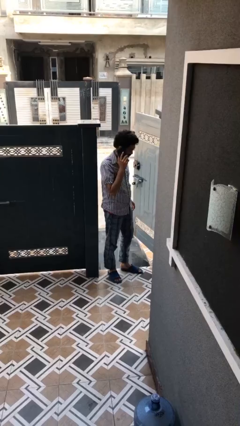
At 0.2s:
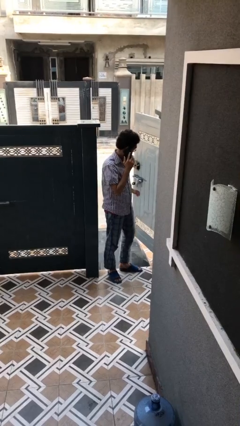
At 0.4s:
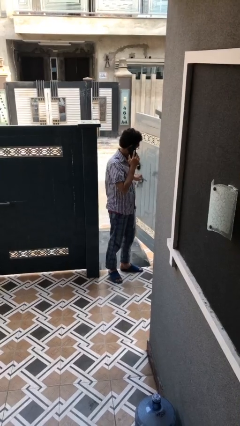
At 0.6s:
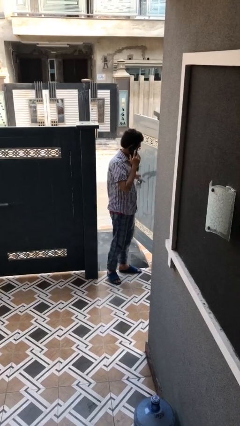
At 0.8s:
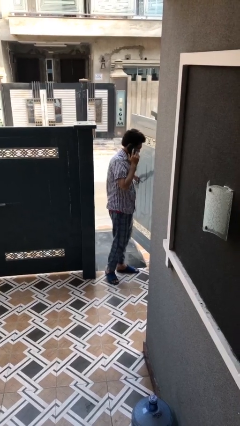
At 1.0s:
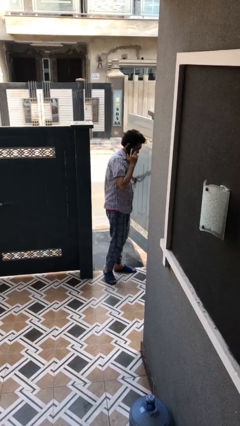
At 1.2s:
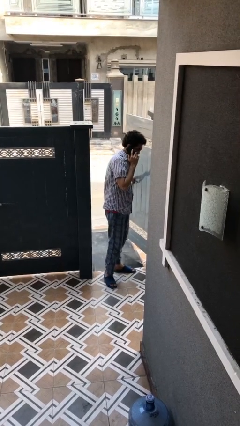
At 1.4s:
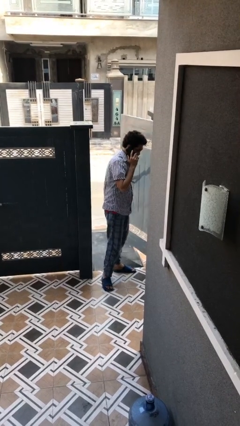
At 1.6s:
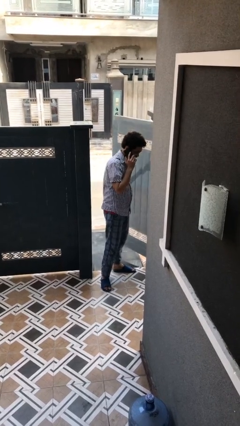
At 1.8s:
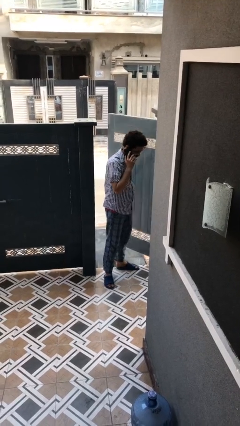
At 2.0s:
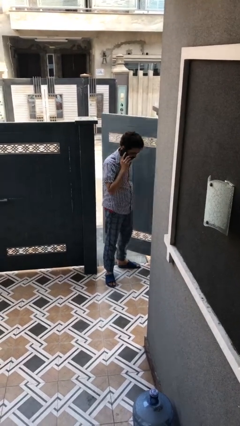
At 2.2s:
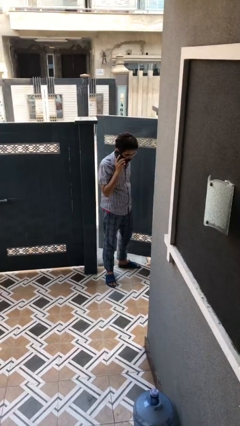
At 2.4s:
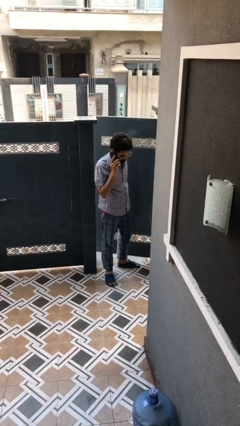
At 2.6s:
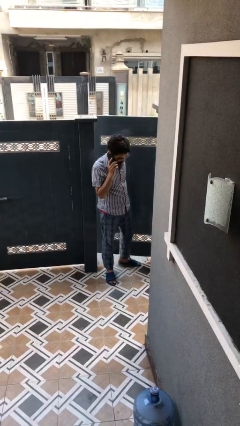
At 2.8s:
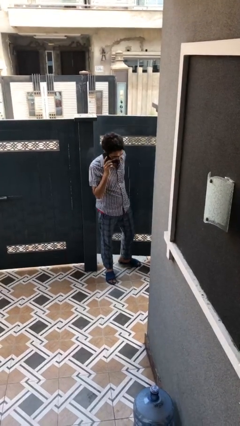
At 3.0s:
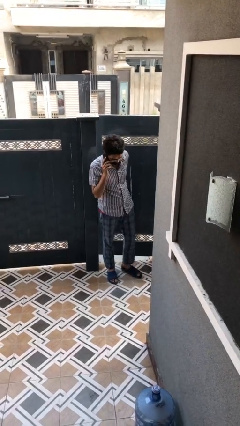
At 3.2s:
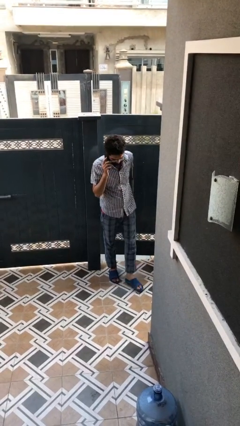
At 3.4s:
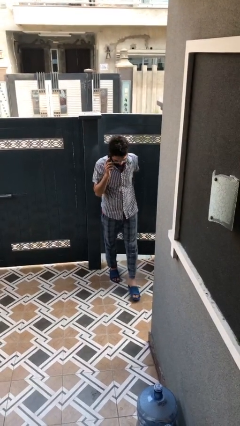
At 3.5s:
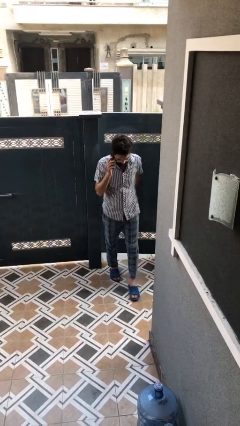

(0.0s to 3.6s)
person closes facility door

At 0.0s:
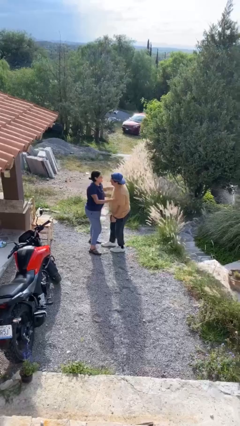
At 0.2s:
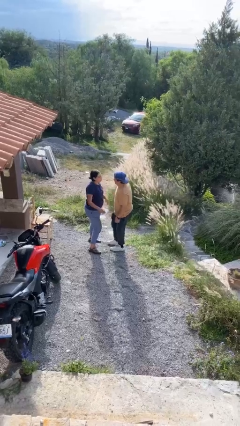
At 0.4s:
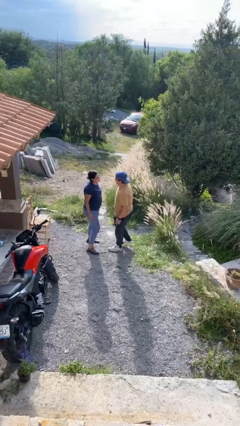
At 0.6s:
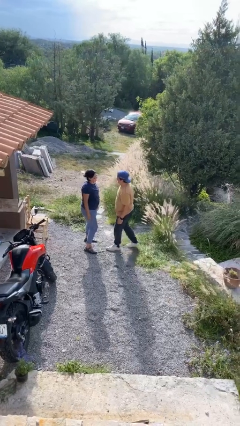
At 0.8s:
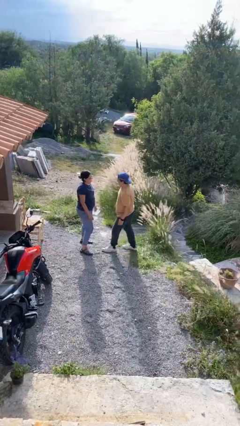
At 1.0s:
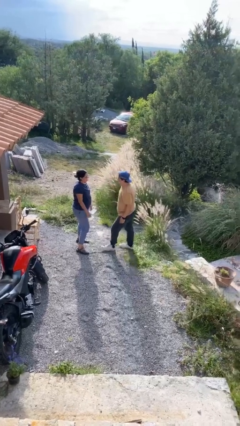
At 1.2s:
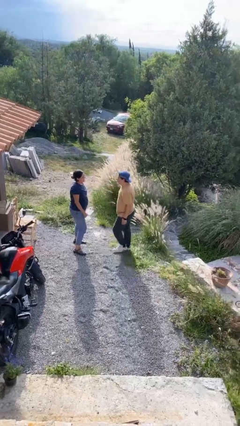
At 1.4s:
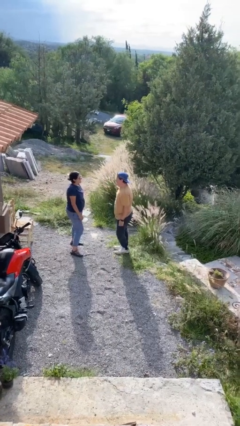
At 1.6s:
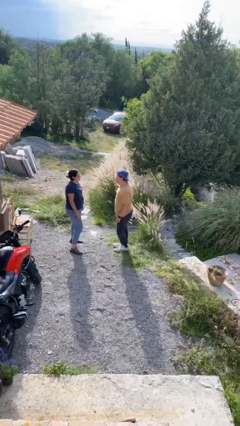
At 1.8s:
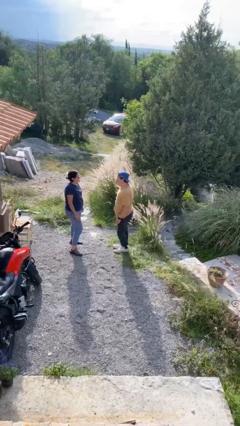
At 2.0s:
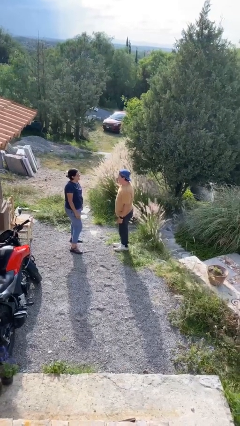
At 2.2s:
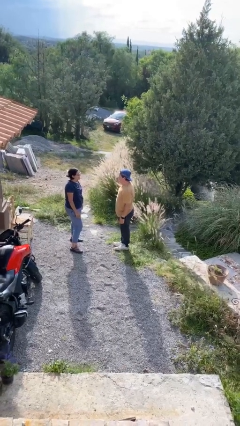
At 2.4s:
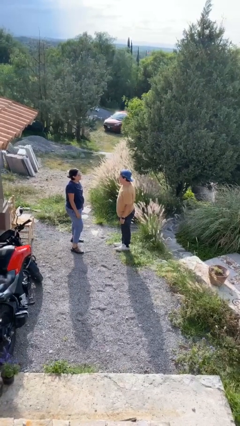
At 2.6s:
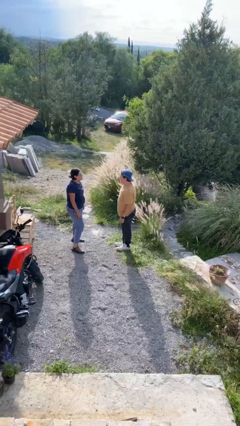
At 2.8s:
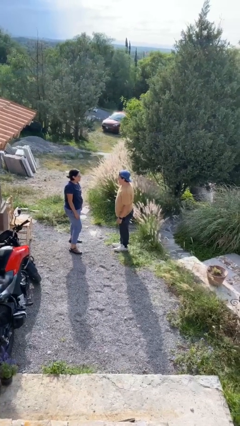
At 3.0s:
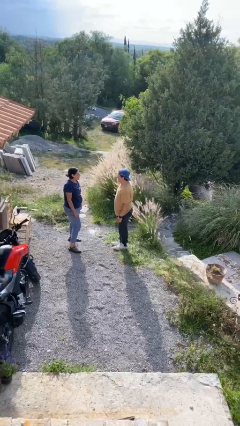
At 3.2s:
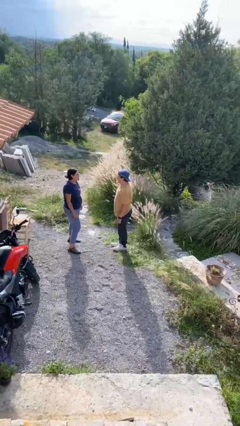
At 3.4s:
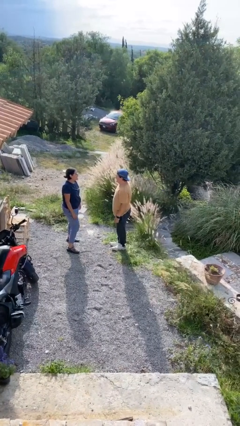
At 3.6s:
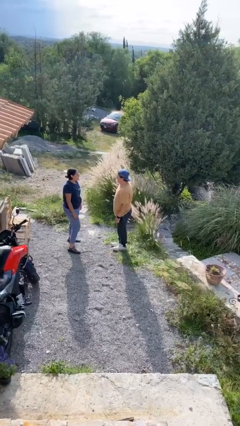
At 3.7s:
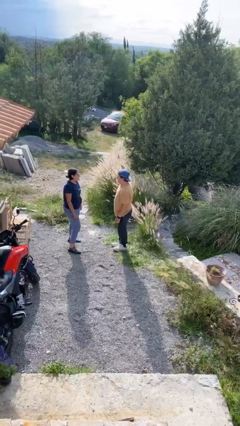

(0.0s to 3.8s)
person talks to person

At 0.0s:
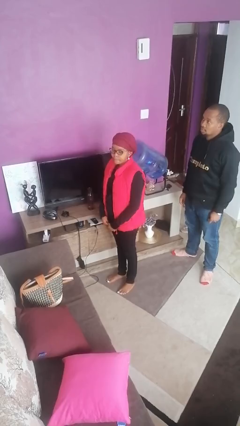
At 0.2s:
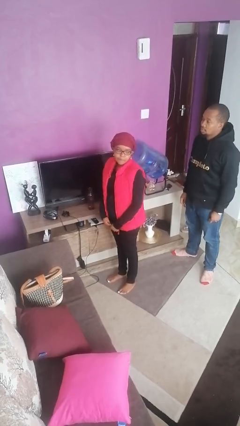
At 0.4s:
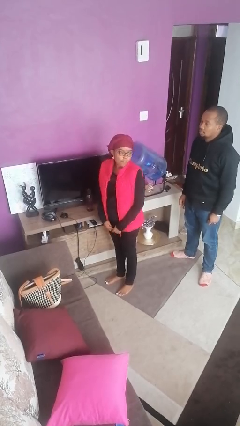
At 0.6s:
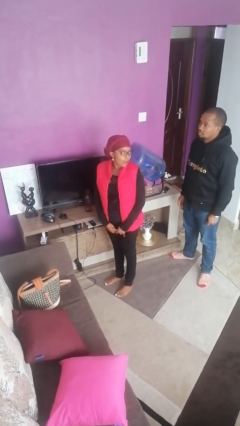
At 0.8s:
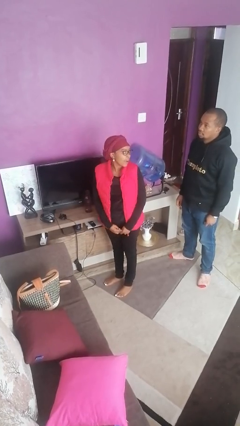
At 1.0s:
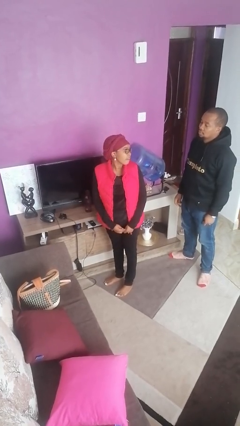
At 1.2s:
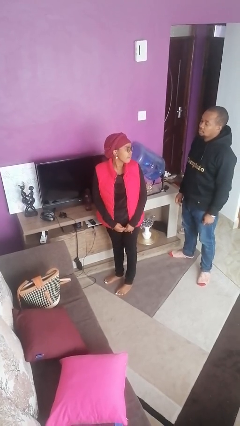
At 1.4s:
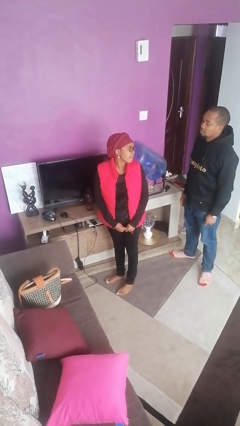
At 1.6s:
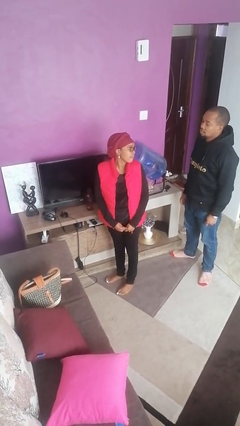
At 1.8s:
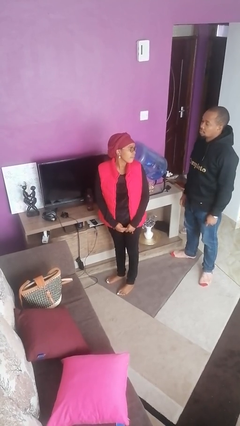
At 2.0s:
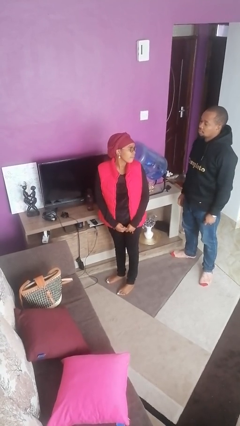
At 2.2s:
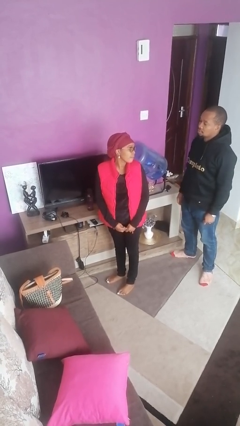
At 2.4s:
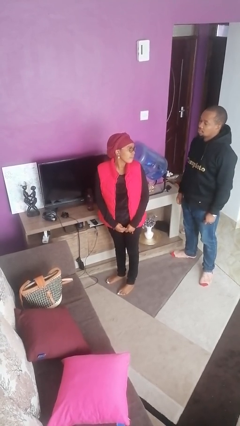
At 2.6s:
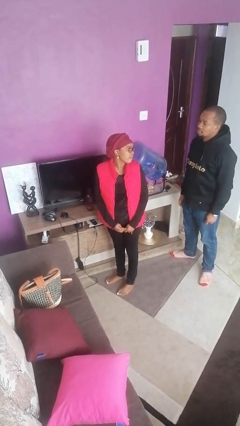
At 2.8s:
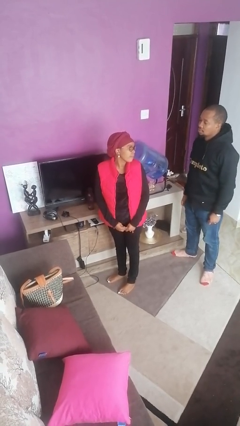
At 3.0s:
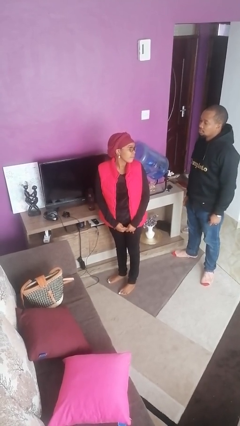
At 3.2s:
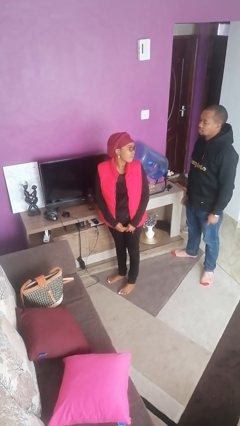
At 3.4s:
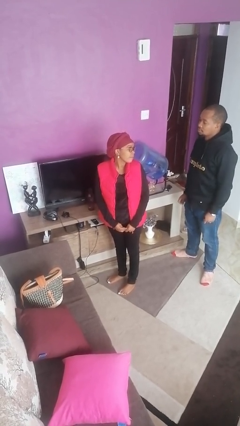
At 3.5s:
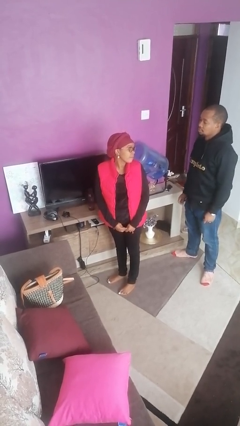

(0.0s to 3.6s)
person looks over shoulder

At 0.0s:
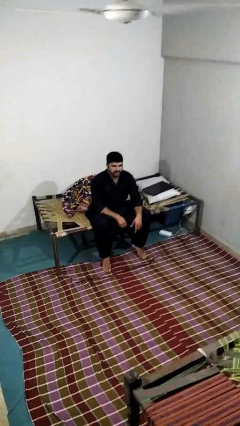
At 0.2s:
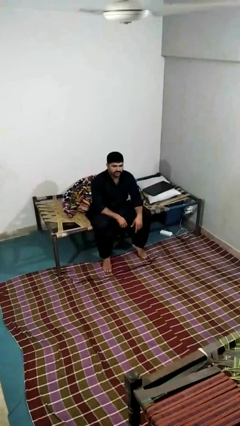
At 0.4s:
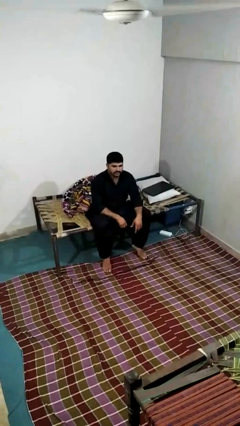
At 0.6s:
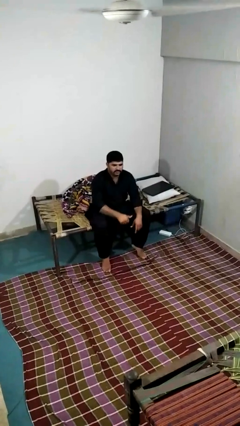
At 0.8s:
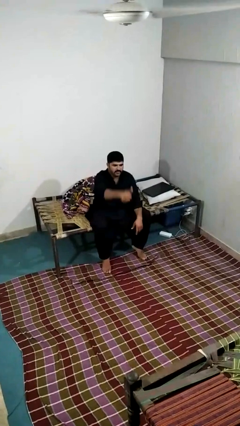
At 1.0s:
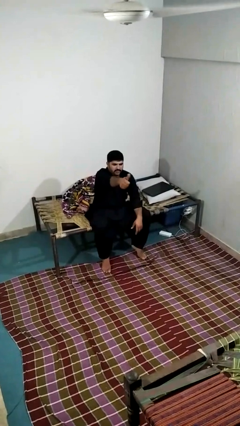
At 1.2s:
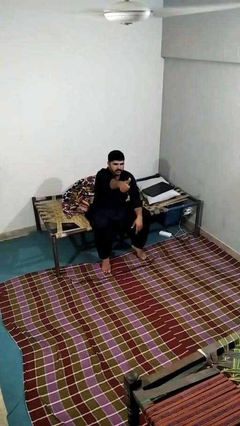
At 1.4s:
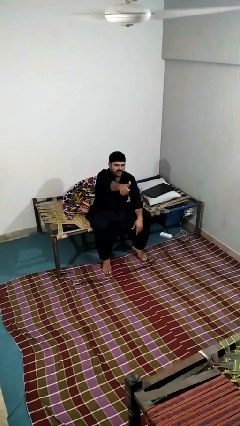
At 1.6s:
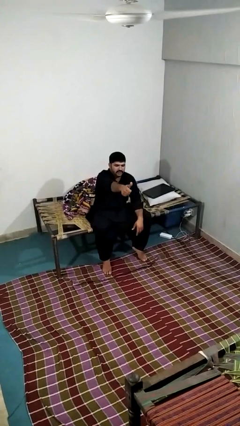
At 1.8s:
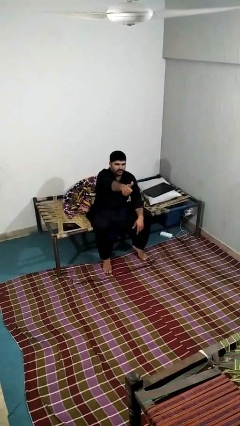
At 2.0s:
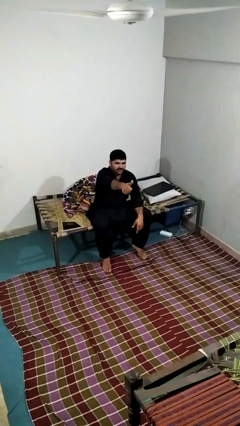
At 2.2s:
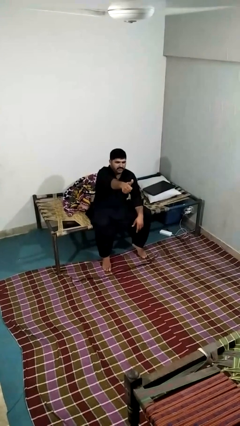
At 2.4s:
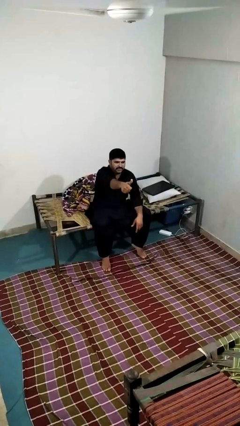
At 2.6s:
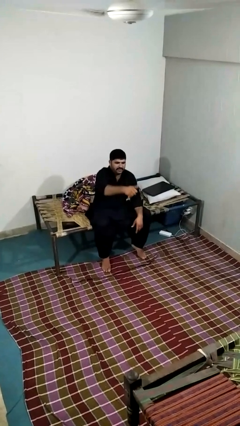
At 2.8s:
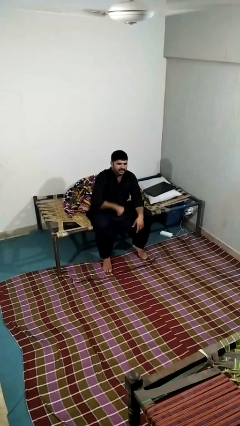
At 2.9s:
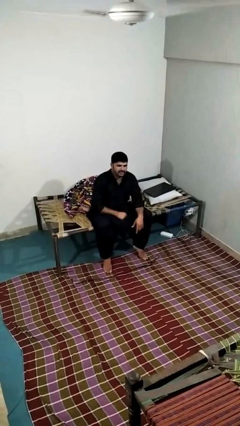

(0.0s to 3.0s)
person gestures thumbs up

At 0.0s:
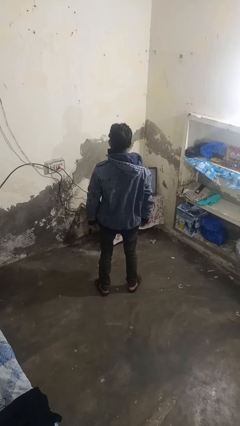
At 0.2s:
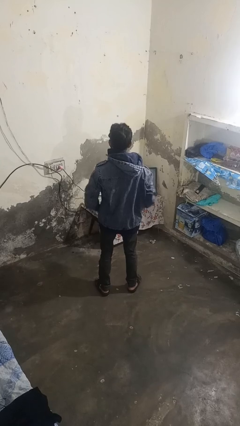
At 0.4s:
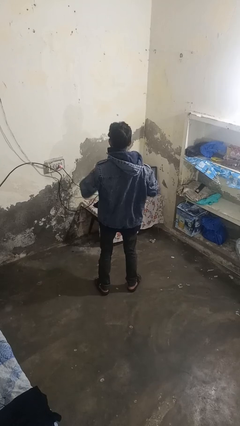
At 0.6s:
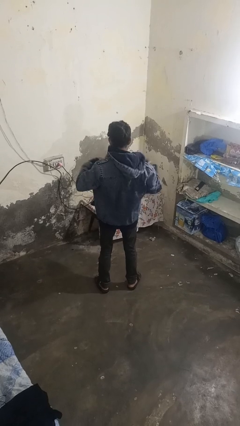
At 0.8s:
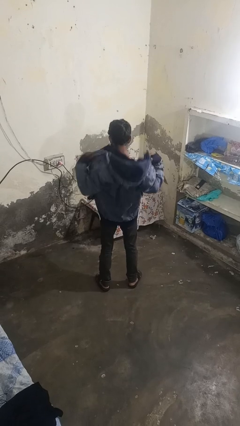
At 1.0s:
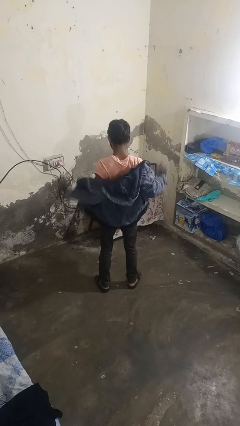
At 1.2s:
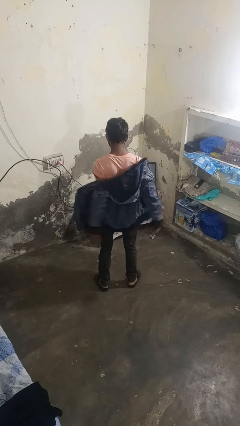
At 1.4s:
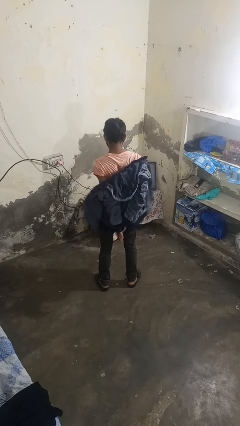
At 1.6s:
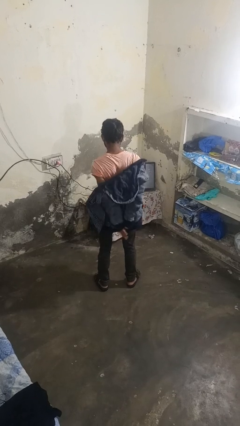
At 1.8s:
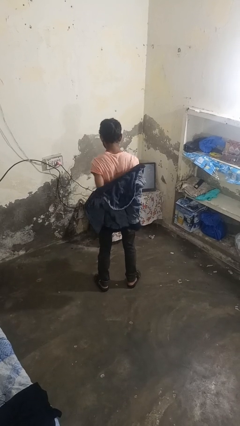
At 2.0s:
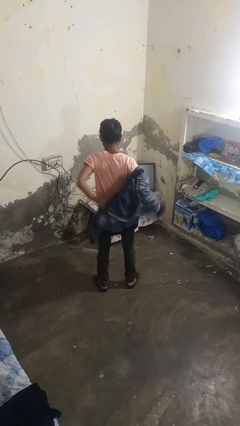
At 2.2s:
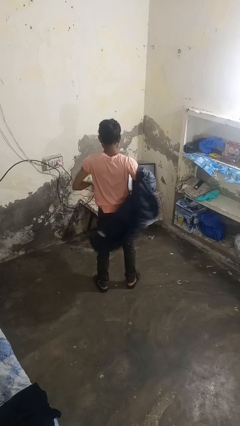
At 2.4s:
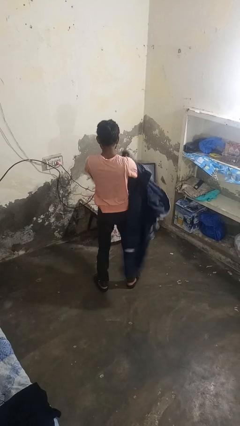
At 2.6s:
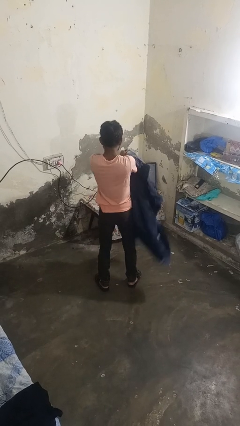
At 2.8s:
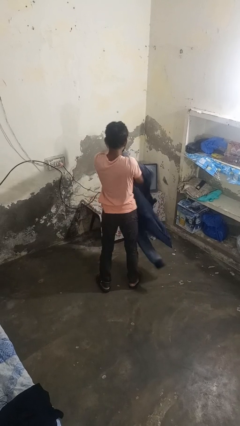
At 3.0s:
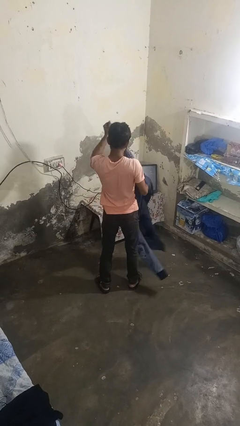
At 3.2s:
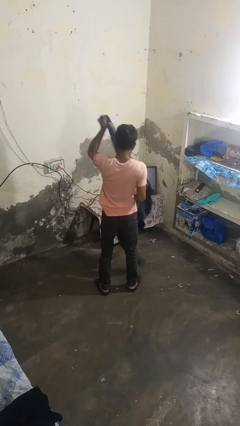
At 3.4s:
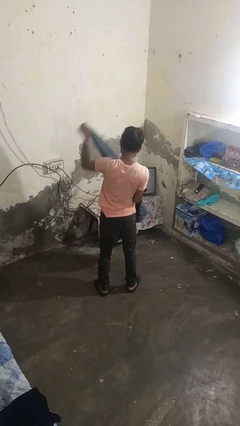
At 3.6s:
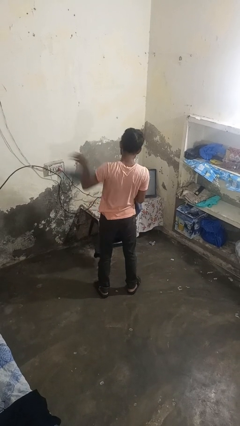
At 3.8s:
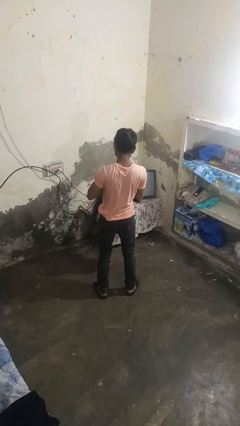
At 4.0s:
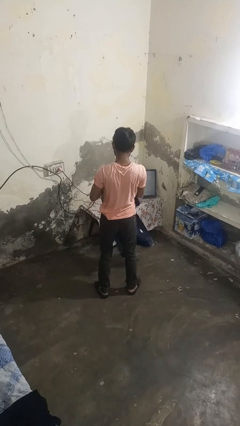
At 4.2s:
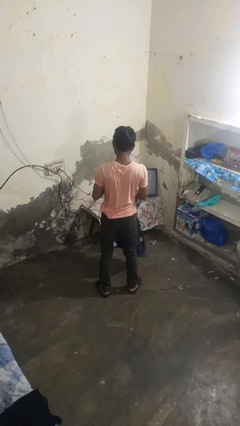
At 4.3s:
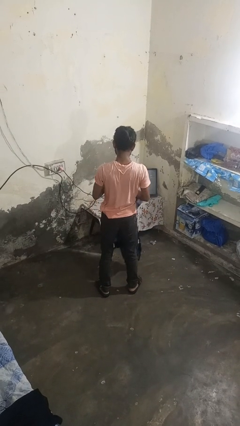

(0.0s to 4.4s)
person takes off jacket
